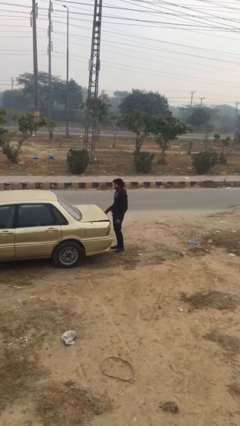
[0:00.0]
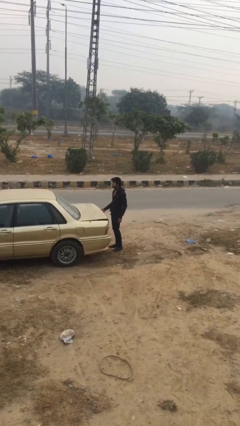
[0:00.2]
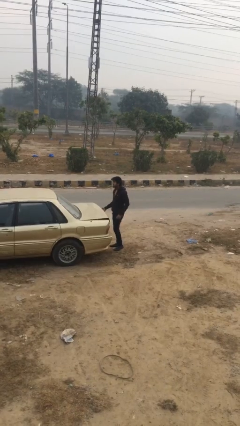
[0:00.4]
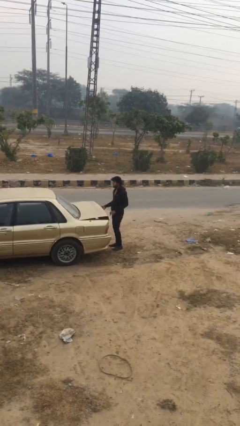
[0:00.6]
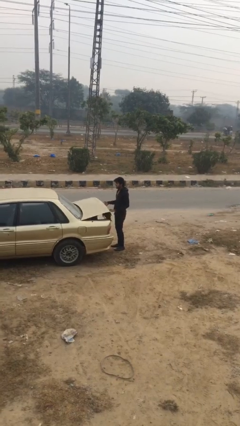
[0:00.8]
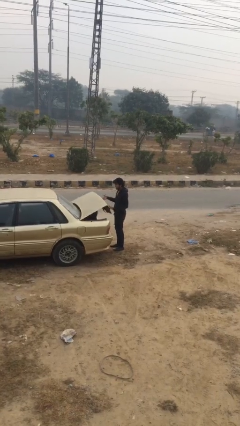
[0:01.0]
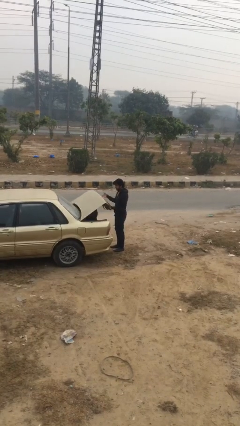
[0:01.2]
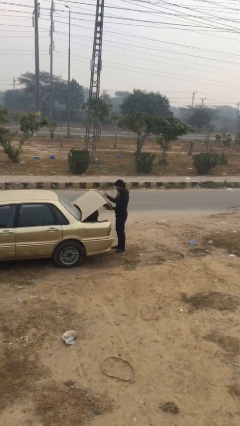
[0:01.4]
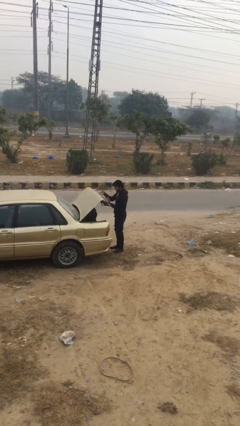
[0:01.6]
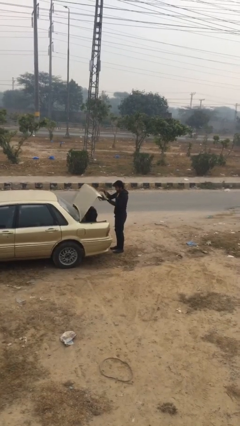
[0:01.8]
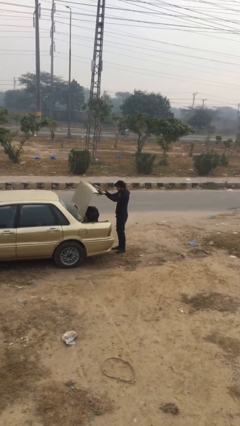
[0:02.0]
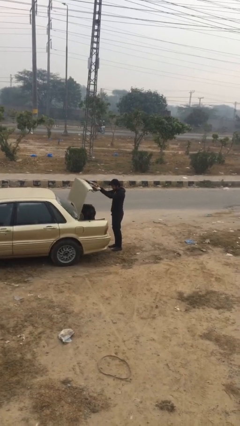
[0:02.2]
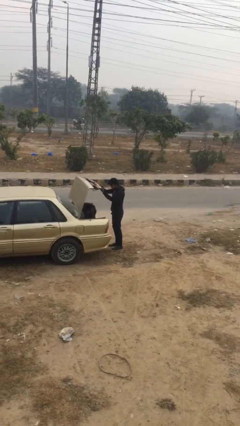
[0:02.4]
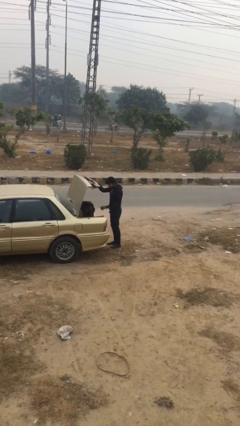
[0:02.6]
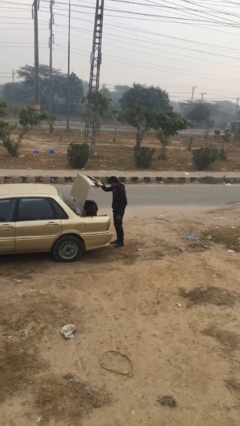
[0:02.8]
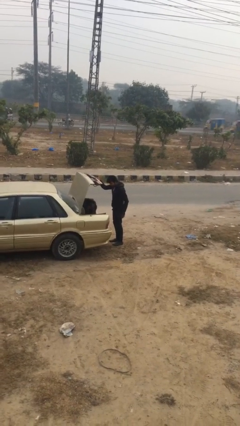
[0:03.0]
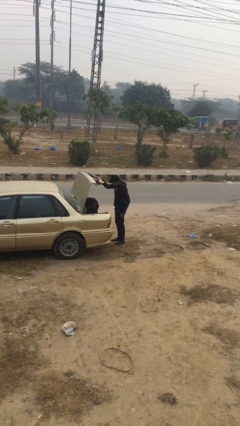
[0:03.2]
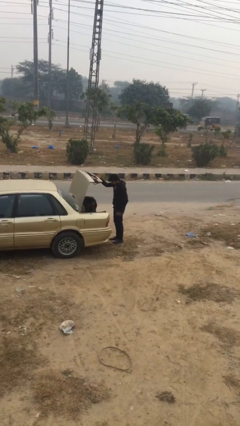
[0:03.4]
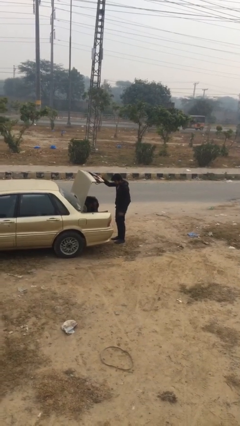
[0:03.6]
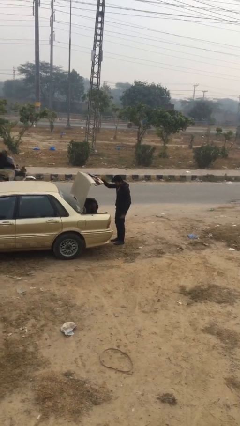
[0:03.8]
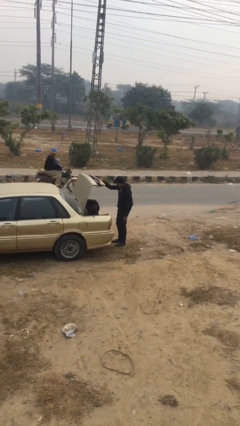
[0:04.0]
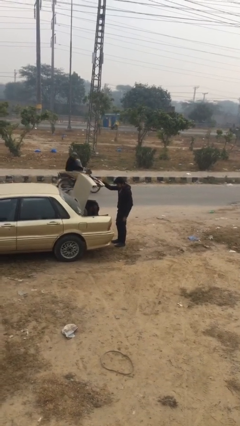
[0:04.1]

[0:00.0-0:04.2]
person opens car trunk

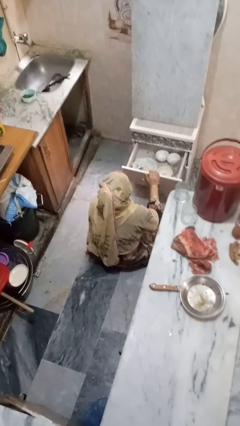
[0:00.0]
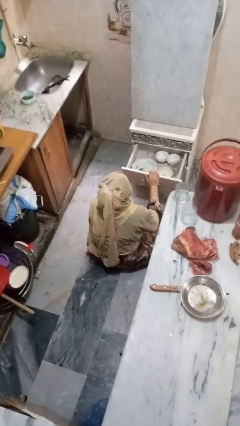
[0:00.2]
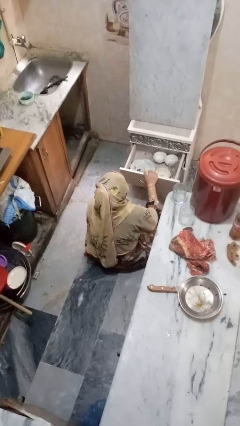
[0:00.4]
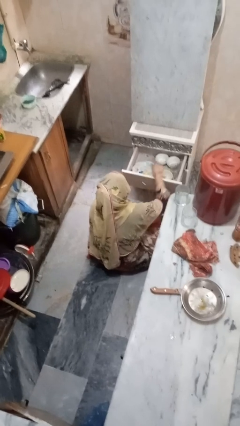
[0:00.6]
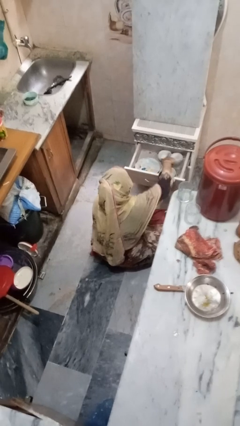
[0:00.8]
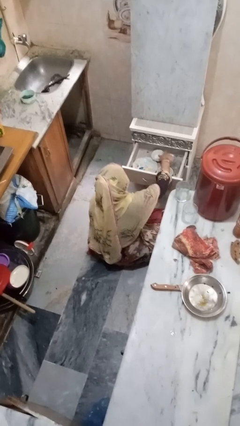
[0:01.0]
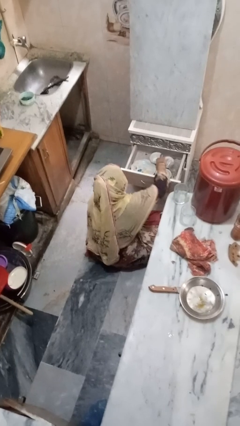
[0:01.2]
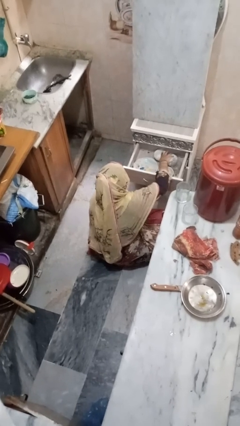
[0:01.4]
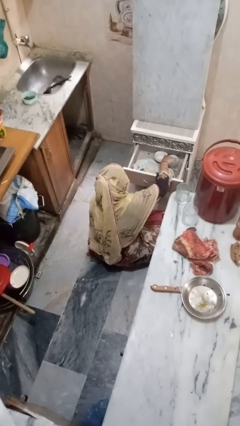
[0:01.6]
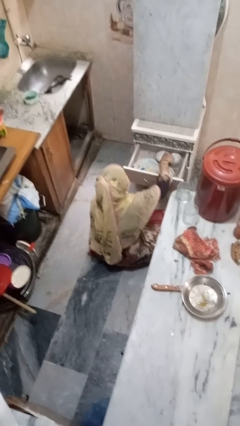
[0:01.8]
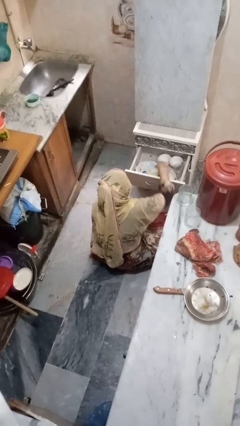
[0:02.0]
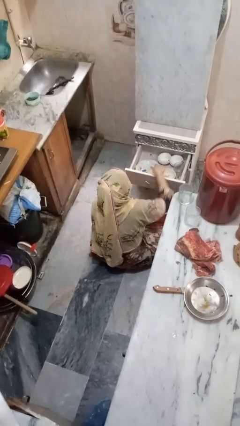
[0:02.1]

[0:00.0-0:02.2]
person searches in kitchen drawer

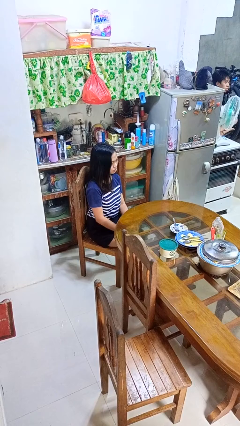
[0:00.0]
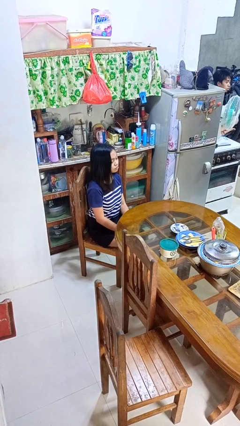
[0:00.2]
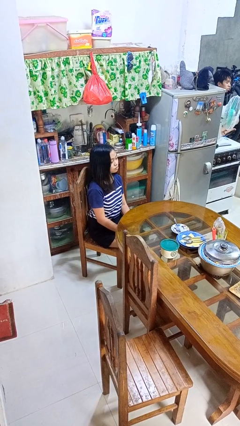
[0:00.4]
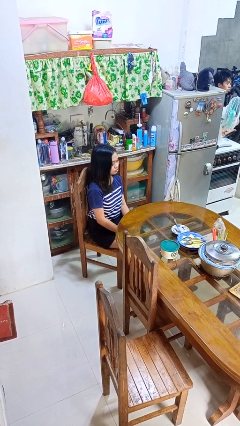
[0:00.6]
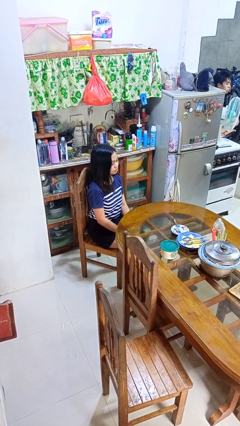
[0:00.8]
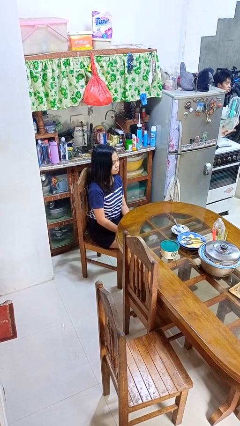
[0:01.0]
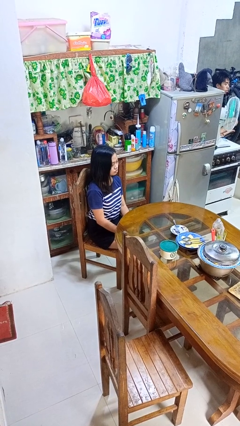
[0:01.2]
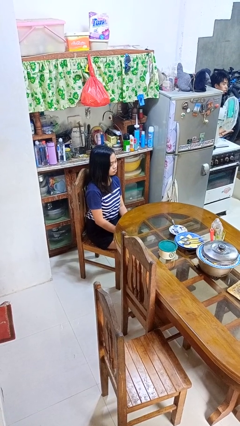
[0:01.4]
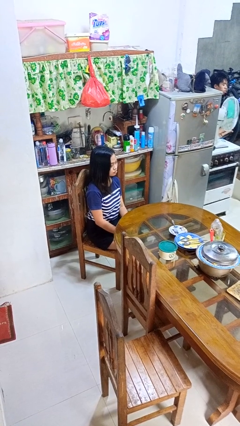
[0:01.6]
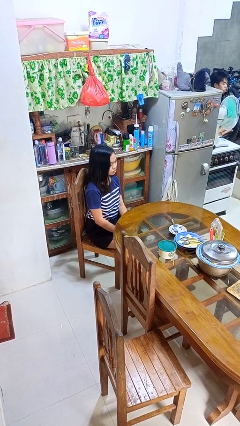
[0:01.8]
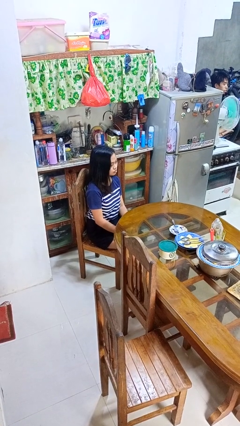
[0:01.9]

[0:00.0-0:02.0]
person nods head

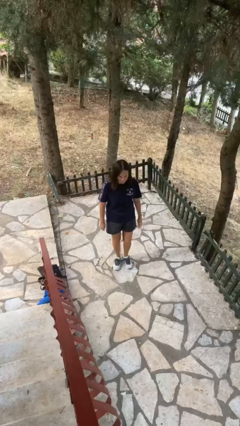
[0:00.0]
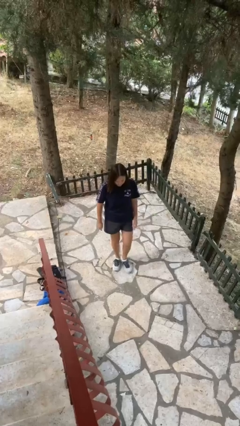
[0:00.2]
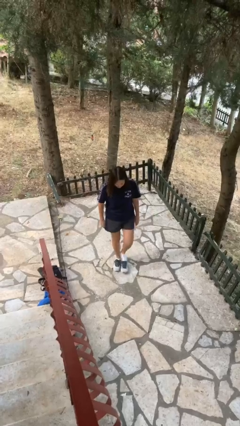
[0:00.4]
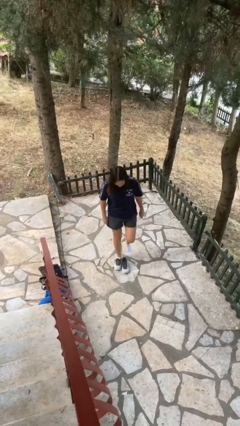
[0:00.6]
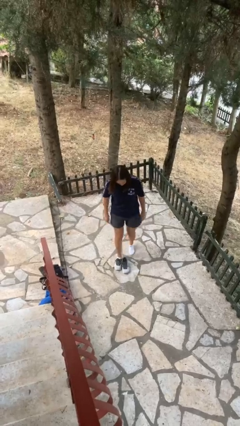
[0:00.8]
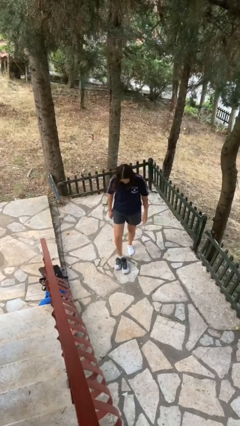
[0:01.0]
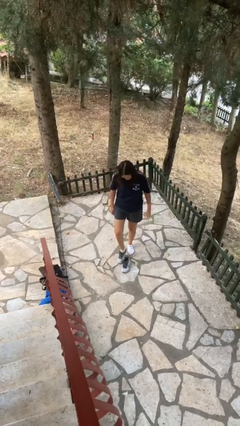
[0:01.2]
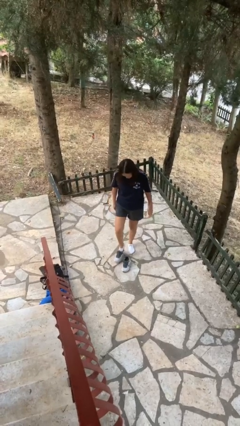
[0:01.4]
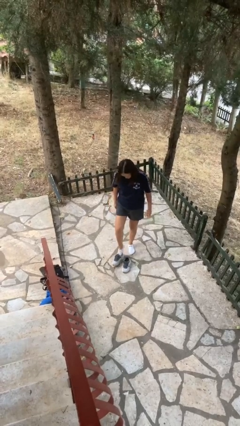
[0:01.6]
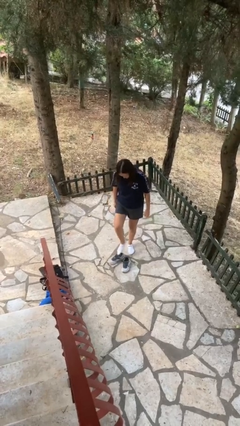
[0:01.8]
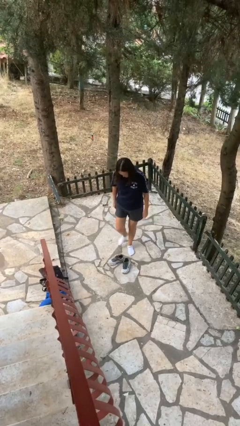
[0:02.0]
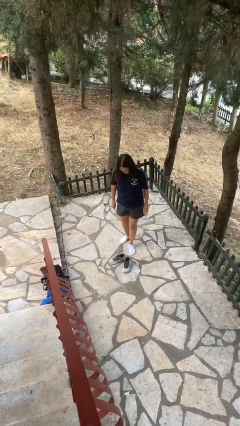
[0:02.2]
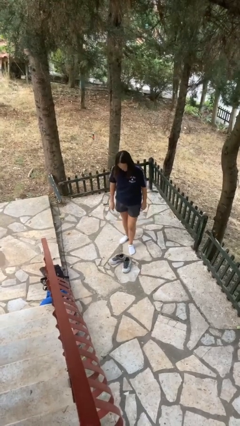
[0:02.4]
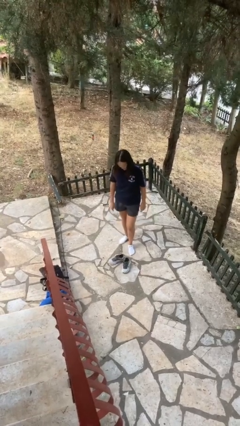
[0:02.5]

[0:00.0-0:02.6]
person takes off shoes

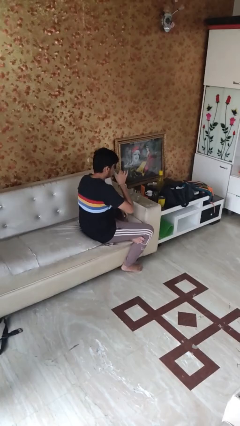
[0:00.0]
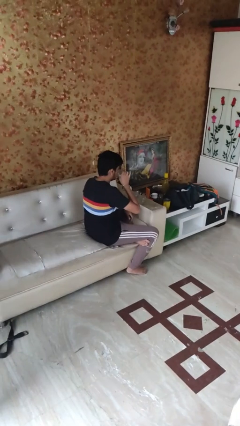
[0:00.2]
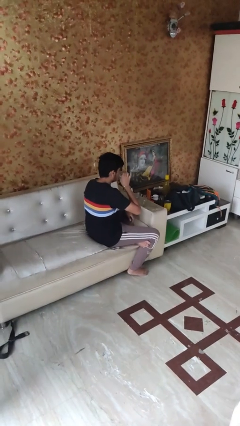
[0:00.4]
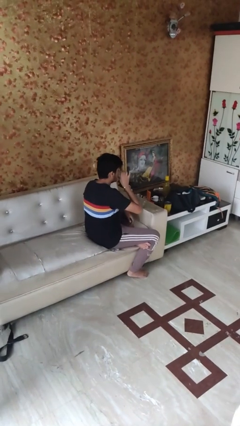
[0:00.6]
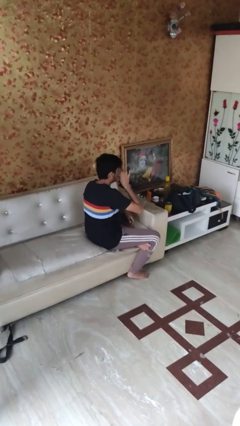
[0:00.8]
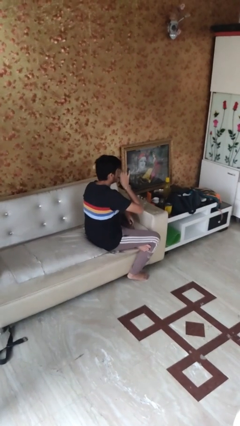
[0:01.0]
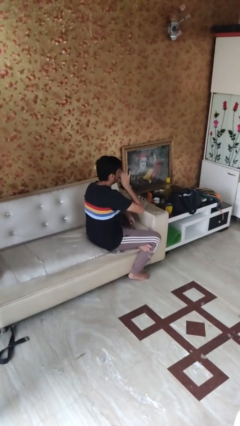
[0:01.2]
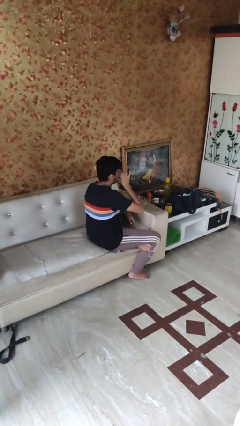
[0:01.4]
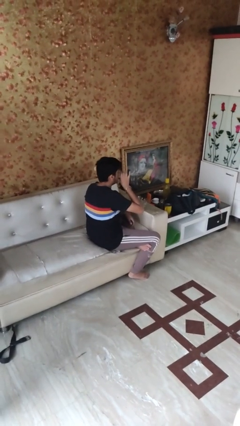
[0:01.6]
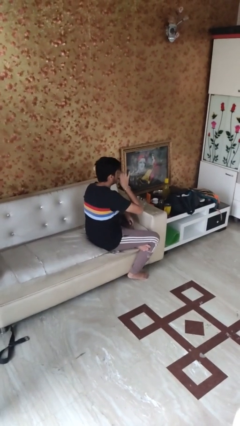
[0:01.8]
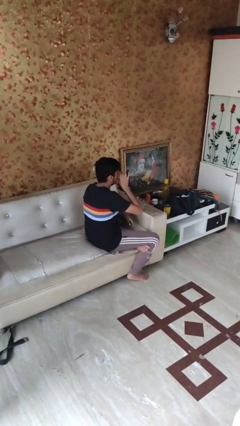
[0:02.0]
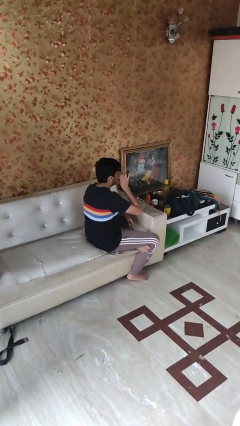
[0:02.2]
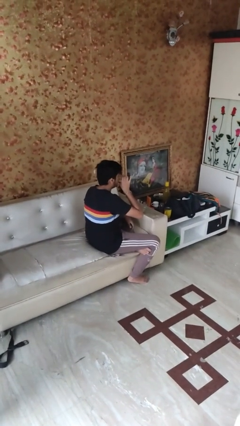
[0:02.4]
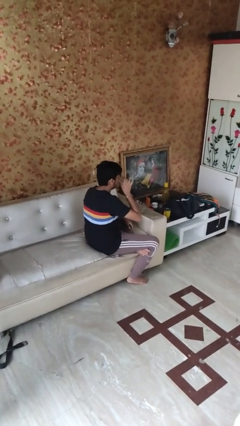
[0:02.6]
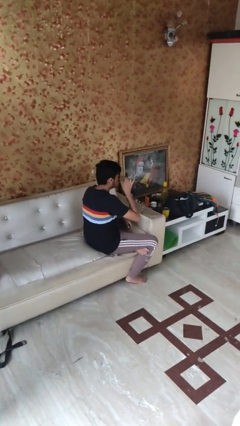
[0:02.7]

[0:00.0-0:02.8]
person drinks from shotglass

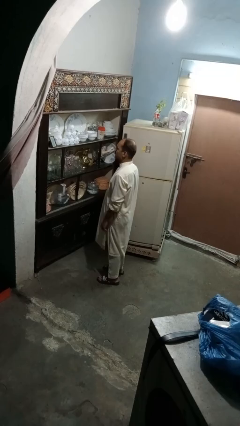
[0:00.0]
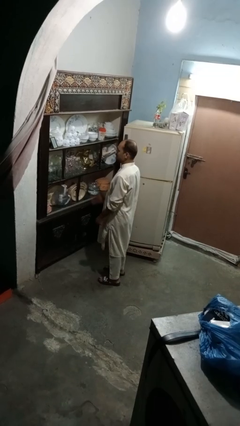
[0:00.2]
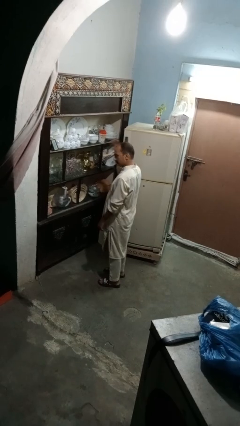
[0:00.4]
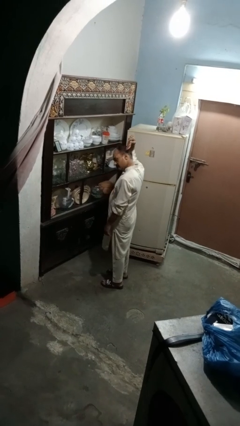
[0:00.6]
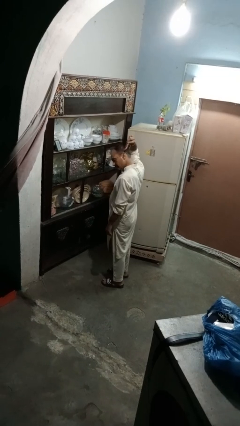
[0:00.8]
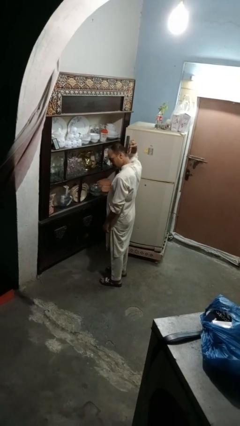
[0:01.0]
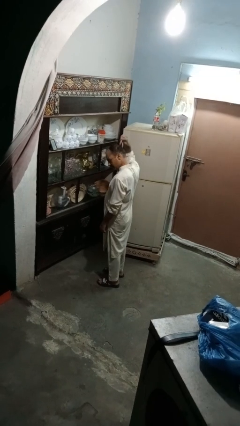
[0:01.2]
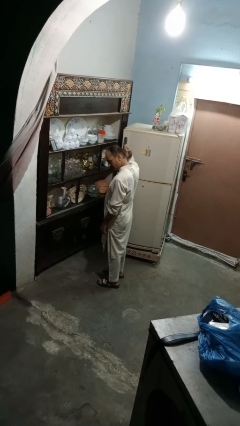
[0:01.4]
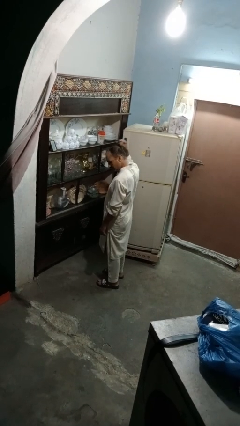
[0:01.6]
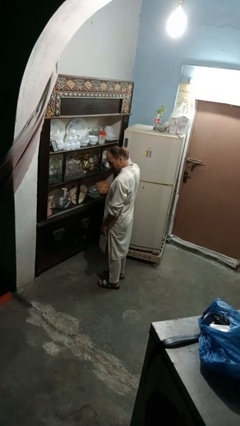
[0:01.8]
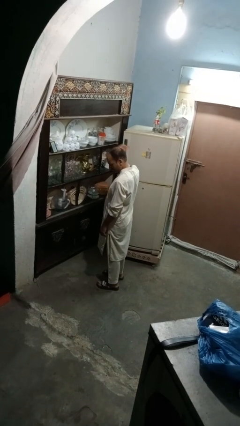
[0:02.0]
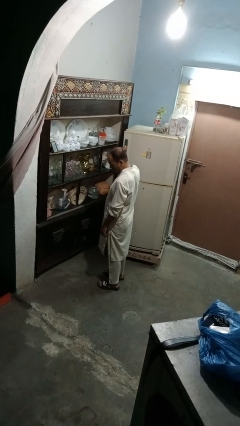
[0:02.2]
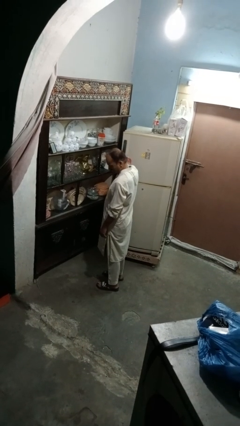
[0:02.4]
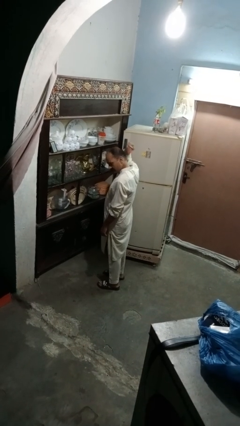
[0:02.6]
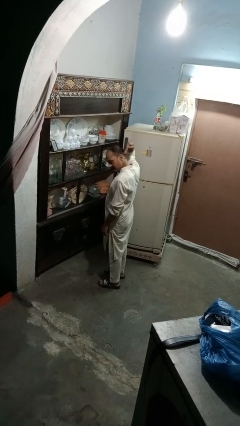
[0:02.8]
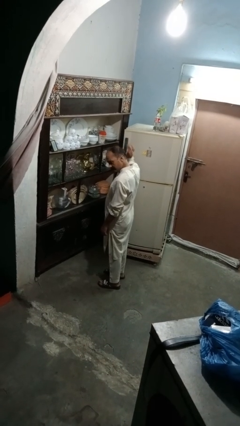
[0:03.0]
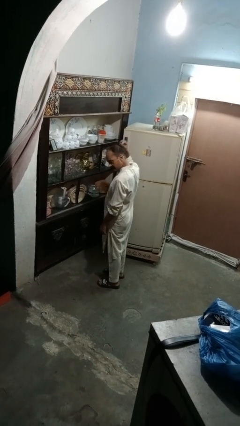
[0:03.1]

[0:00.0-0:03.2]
person brushes hair

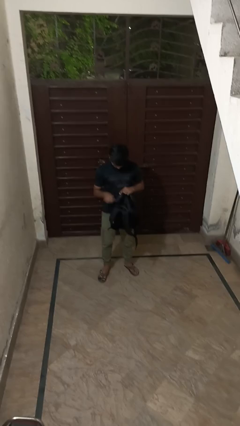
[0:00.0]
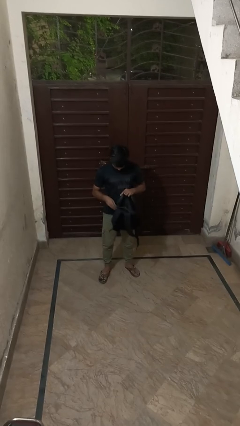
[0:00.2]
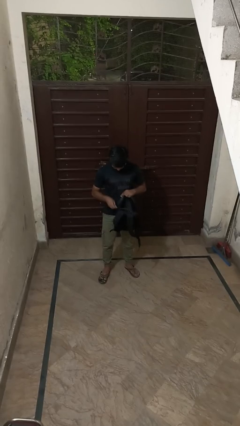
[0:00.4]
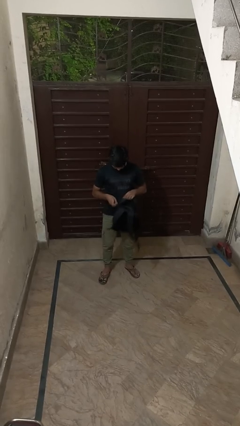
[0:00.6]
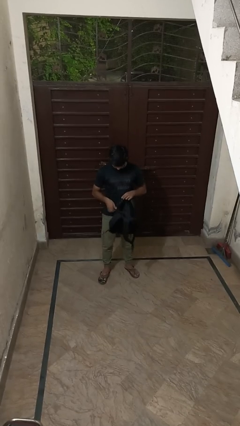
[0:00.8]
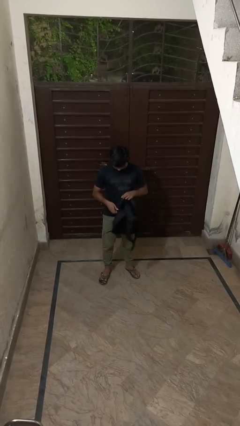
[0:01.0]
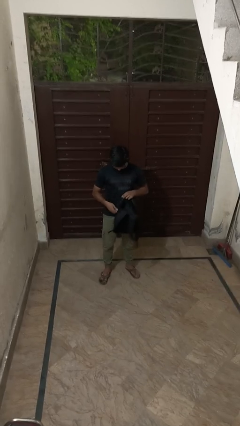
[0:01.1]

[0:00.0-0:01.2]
person puts object into backpack
